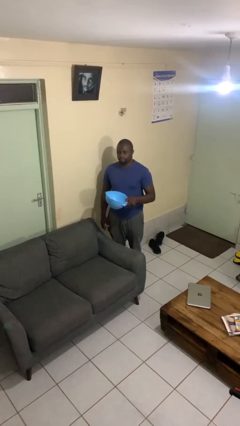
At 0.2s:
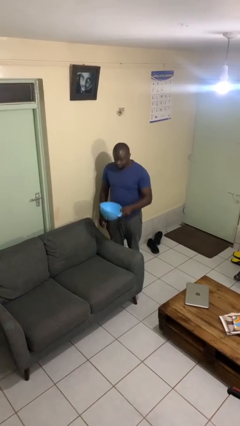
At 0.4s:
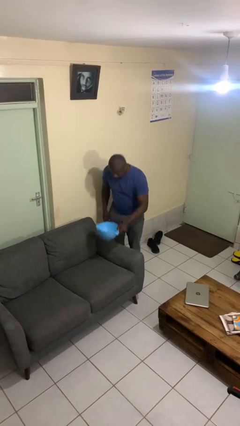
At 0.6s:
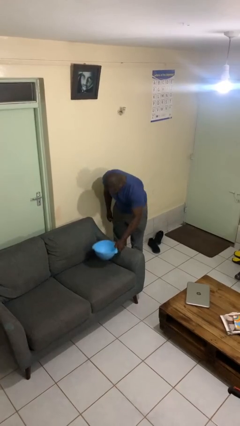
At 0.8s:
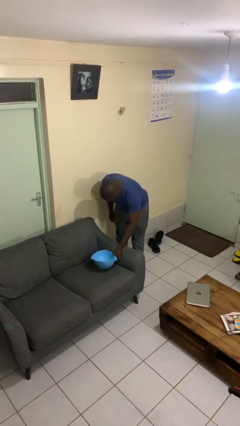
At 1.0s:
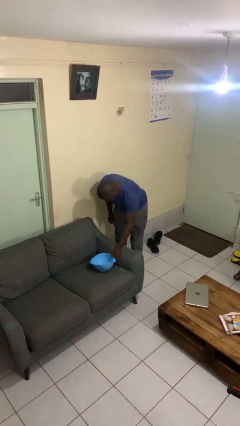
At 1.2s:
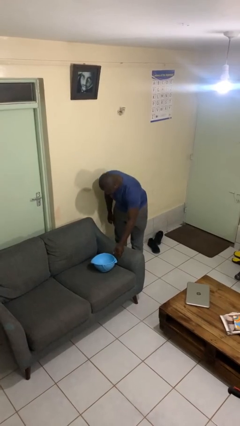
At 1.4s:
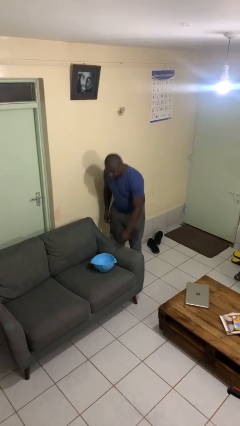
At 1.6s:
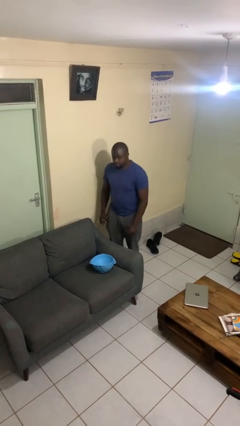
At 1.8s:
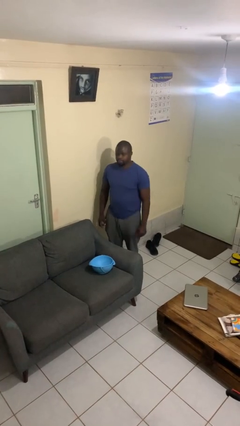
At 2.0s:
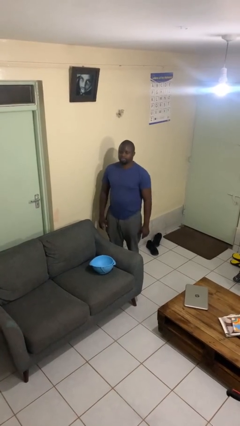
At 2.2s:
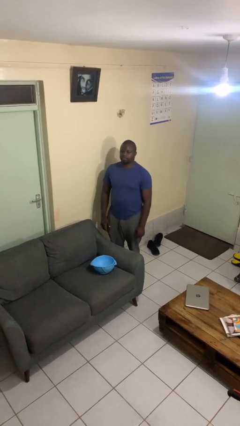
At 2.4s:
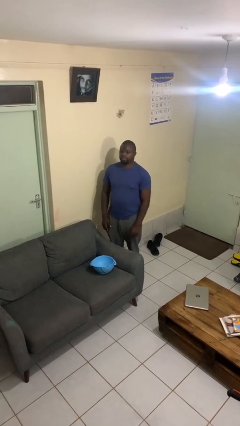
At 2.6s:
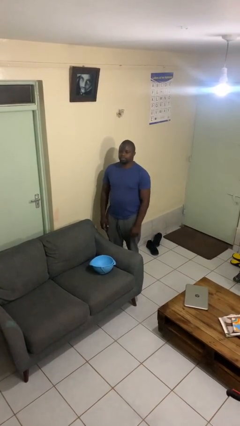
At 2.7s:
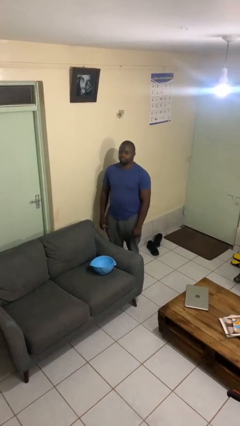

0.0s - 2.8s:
person puts down object on couch

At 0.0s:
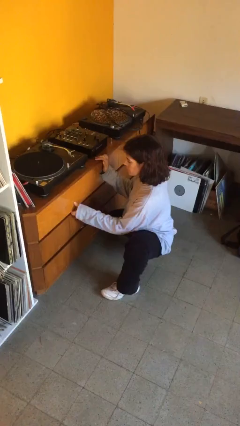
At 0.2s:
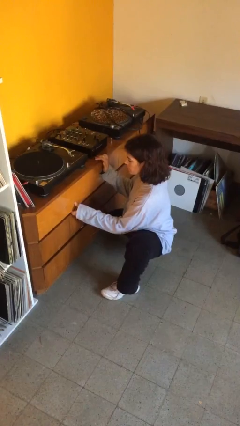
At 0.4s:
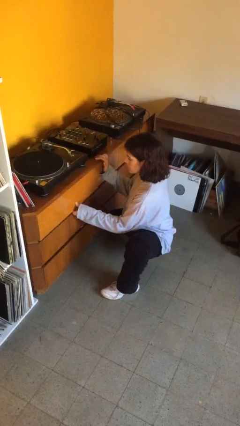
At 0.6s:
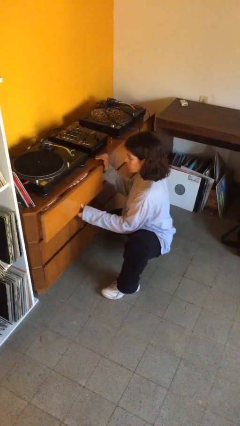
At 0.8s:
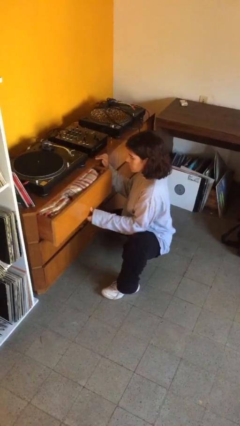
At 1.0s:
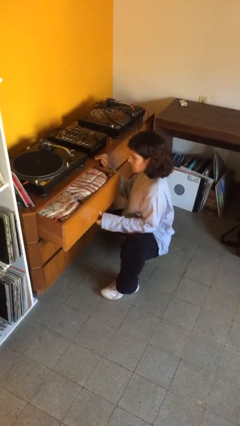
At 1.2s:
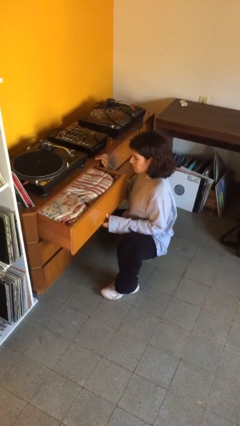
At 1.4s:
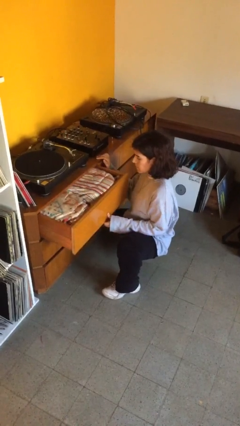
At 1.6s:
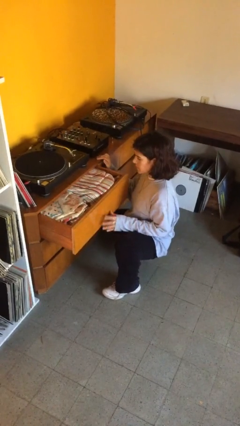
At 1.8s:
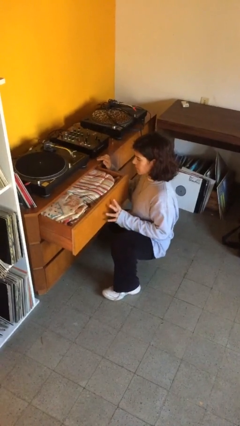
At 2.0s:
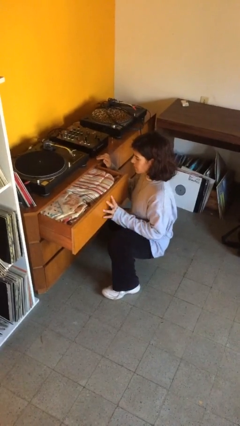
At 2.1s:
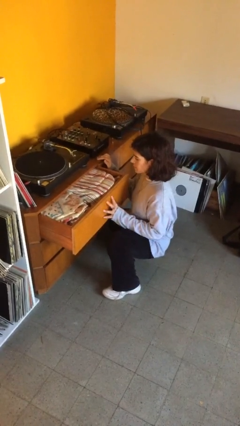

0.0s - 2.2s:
person opens dresser drawer

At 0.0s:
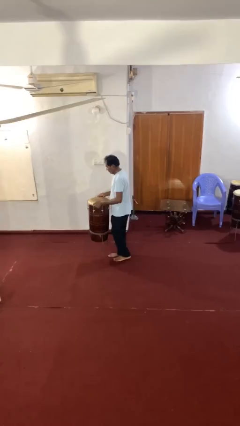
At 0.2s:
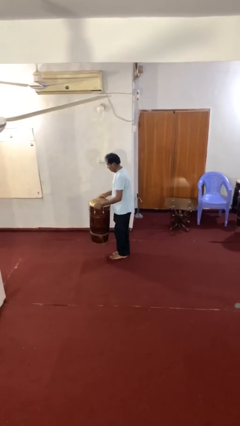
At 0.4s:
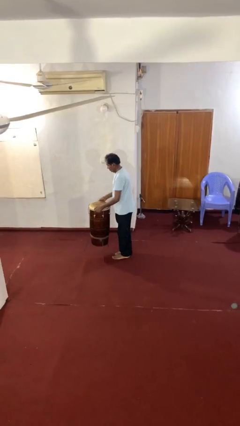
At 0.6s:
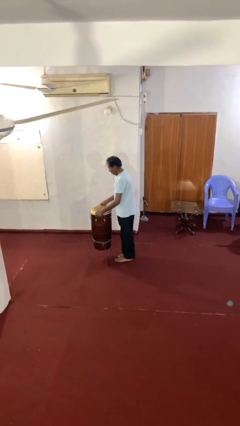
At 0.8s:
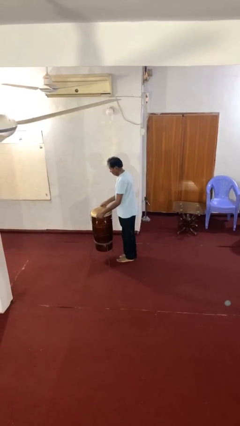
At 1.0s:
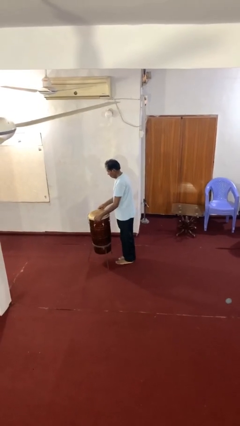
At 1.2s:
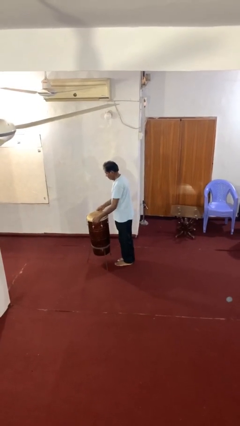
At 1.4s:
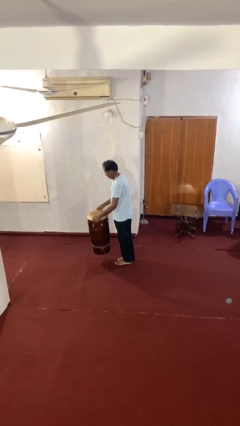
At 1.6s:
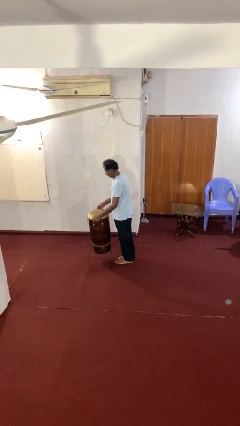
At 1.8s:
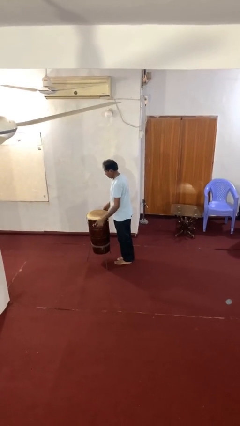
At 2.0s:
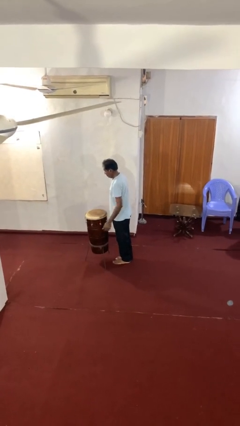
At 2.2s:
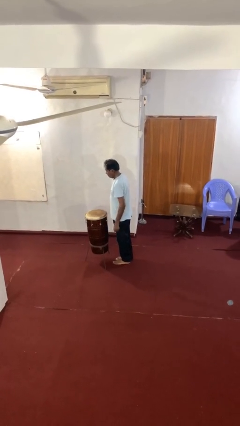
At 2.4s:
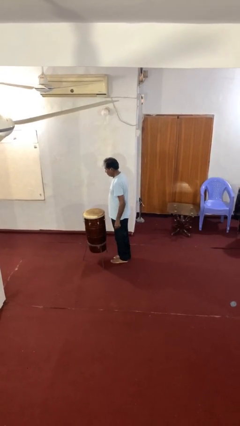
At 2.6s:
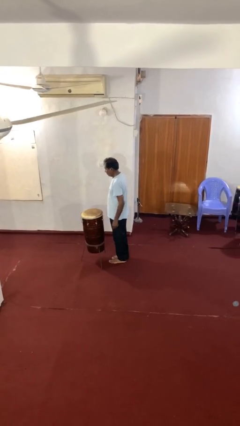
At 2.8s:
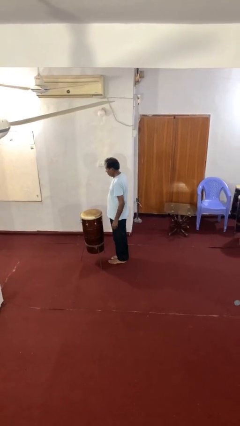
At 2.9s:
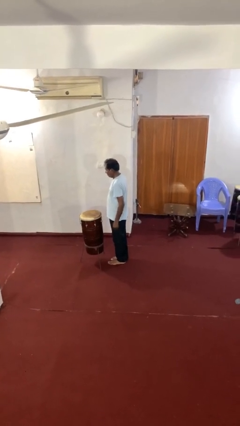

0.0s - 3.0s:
person puts down object on floor

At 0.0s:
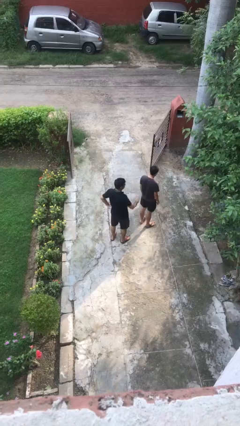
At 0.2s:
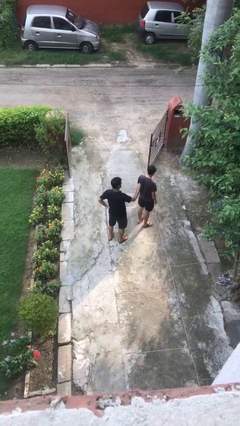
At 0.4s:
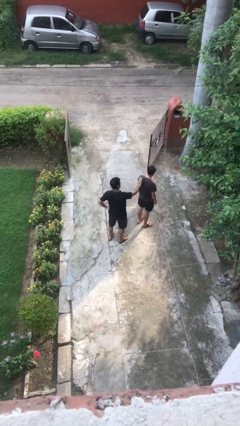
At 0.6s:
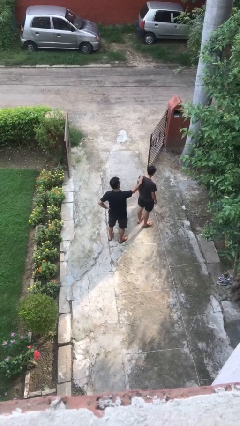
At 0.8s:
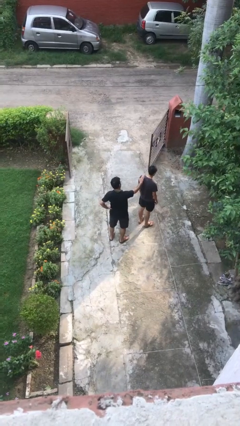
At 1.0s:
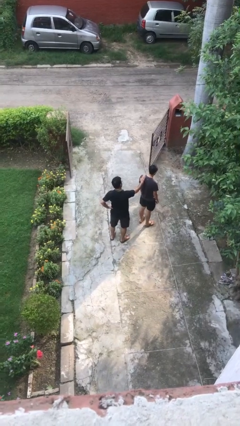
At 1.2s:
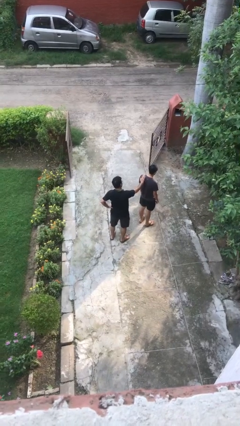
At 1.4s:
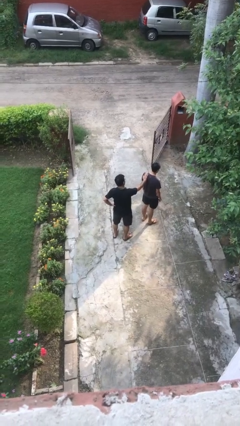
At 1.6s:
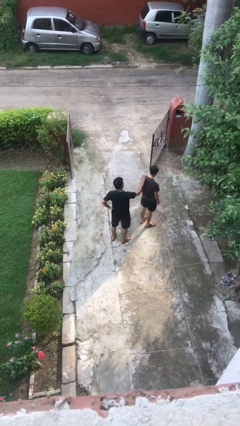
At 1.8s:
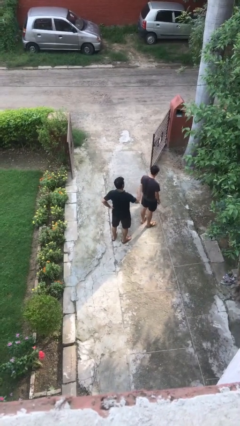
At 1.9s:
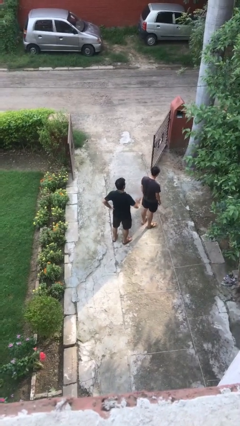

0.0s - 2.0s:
person touches back of person

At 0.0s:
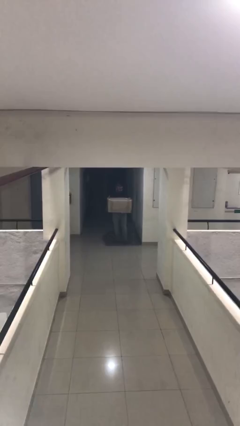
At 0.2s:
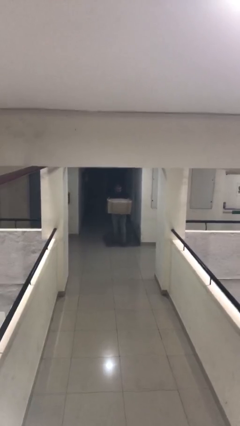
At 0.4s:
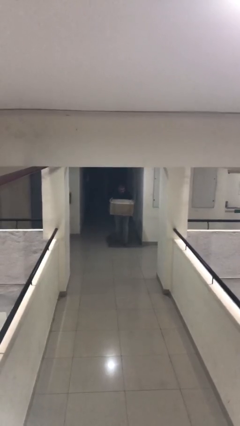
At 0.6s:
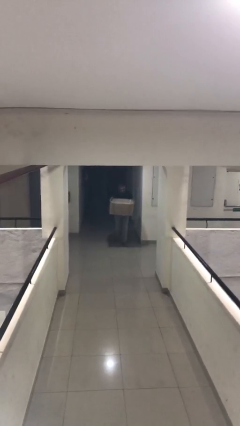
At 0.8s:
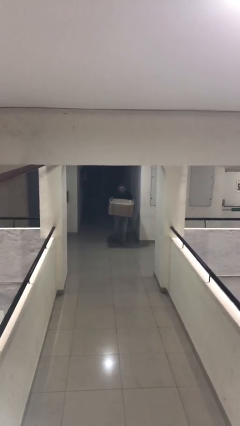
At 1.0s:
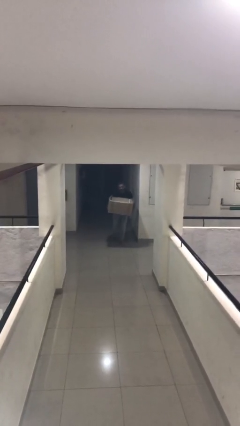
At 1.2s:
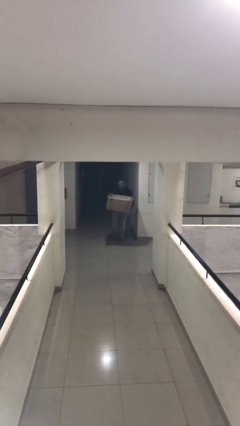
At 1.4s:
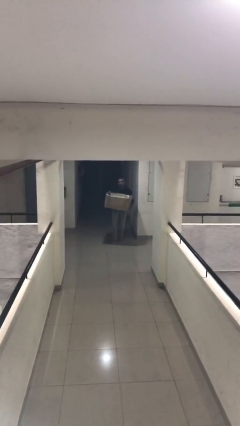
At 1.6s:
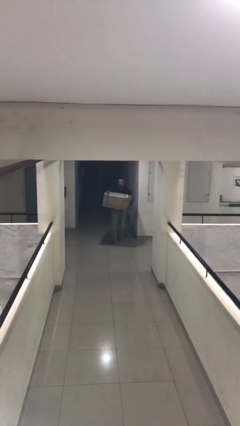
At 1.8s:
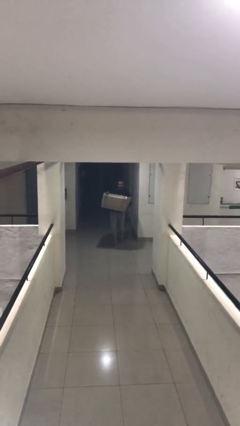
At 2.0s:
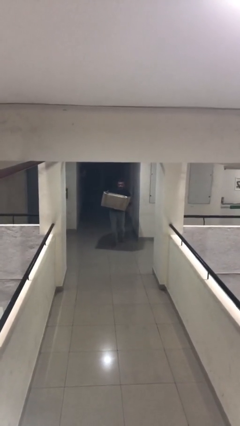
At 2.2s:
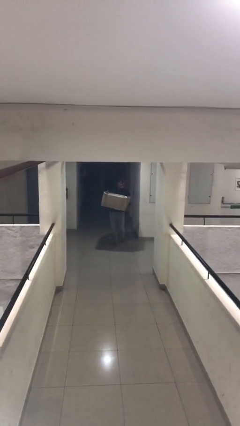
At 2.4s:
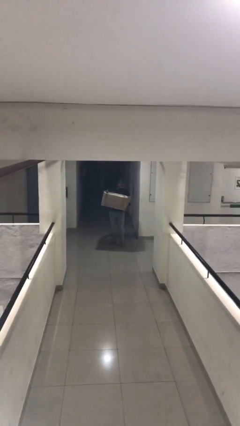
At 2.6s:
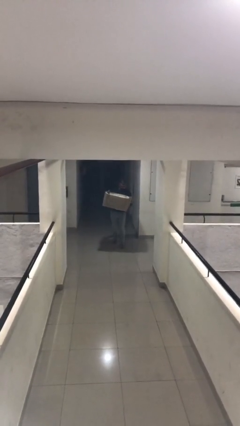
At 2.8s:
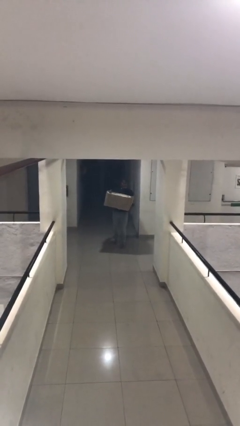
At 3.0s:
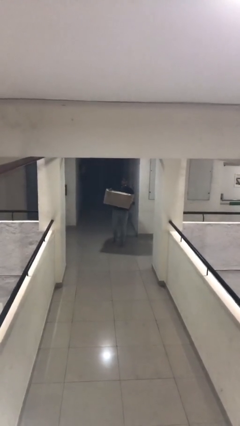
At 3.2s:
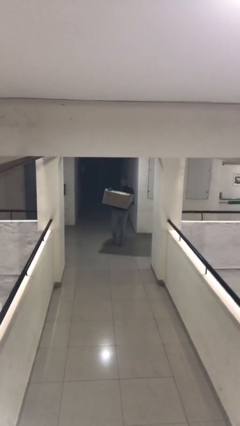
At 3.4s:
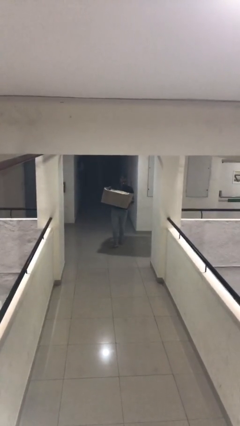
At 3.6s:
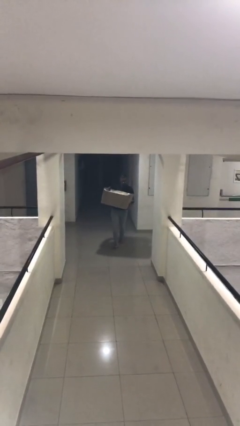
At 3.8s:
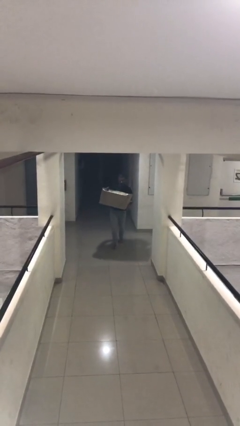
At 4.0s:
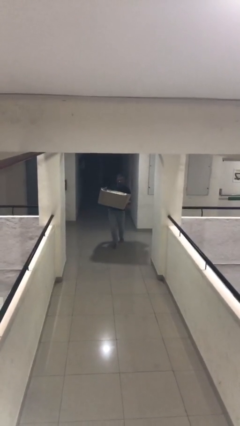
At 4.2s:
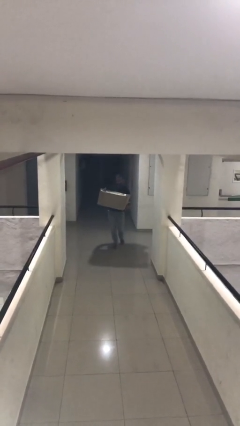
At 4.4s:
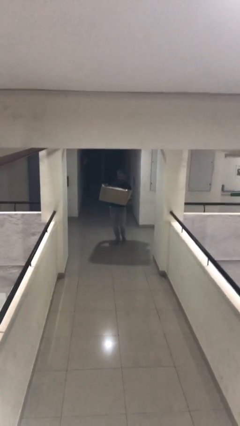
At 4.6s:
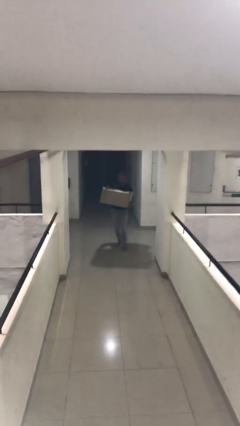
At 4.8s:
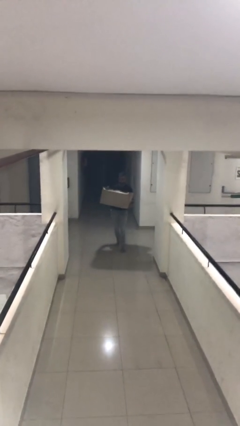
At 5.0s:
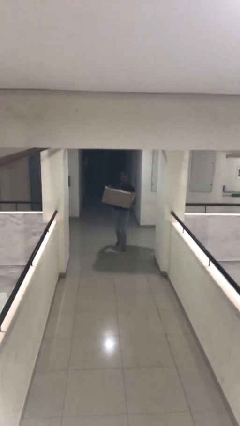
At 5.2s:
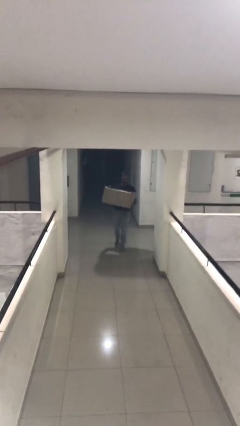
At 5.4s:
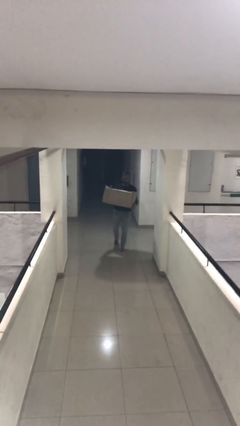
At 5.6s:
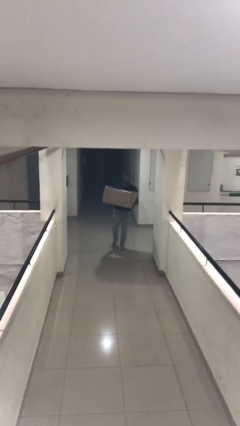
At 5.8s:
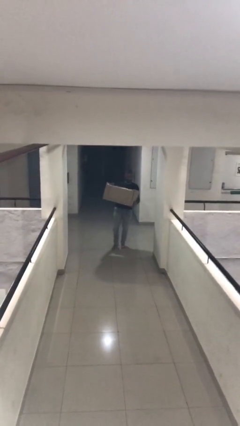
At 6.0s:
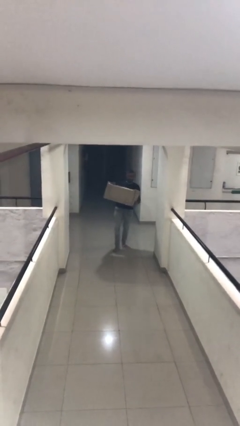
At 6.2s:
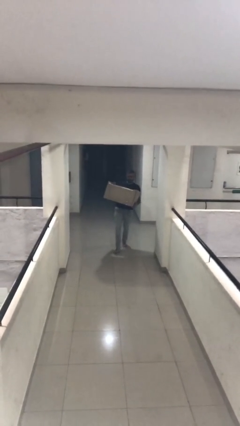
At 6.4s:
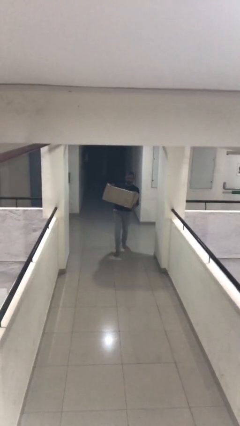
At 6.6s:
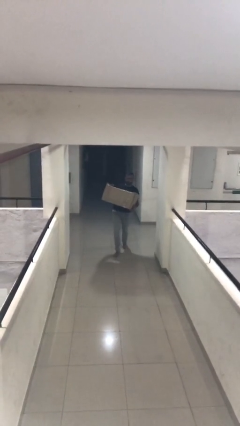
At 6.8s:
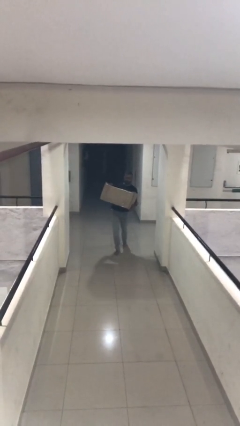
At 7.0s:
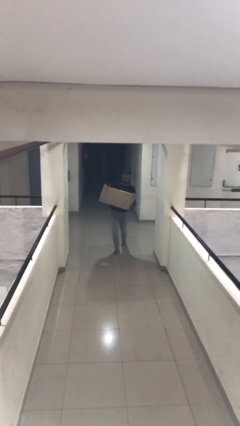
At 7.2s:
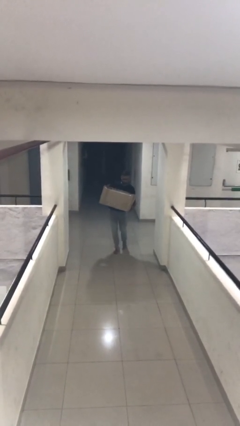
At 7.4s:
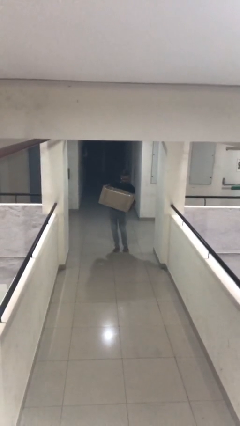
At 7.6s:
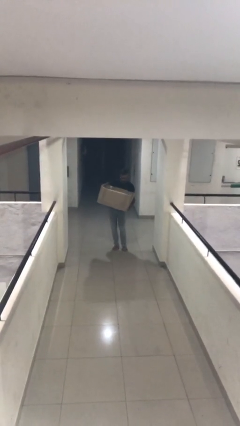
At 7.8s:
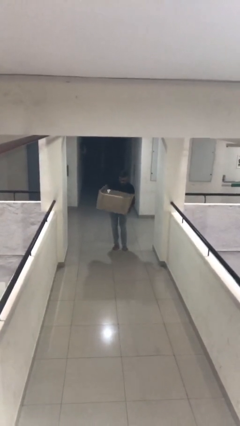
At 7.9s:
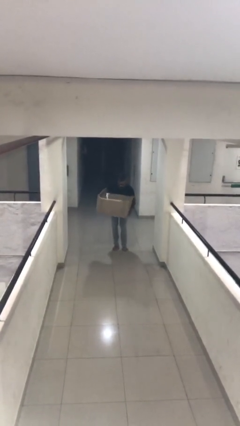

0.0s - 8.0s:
person carries heavy object
